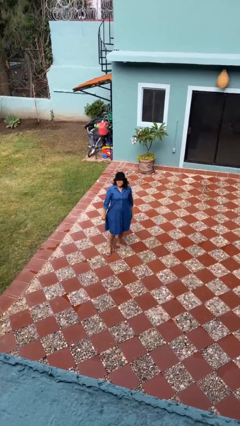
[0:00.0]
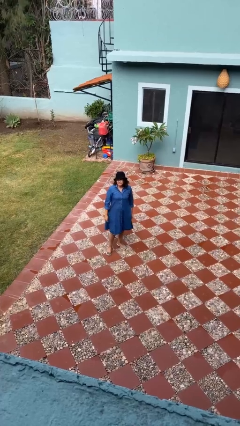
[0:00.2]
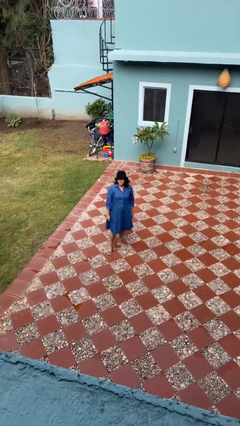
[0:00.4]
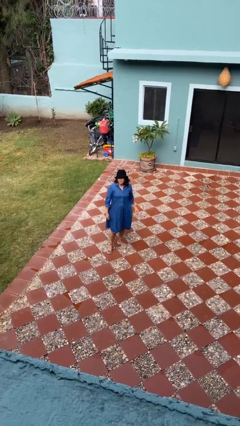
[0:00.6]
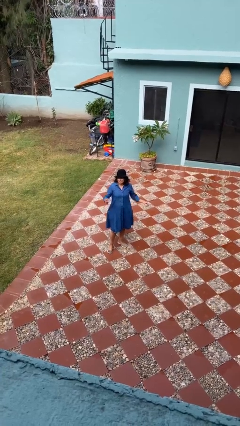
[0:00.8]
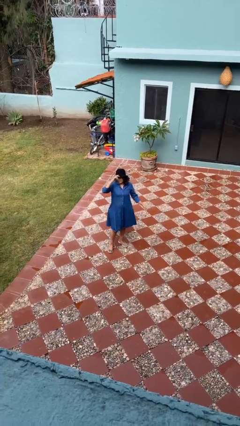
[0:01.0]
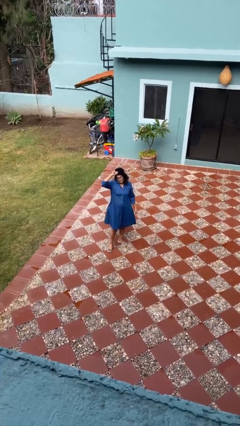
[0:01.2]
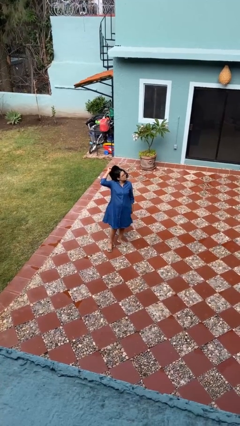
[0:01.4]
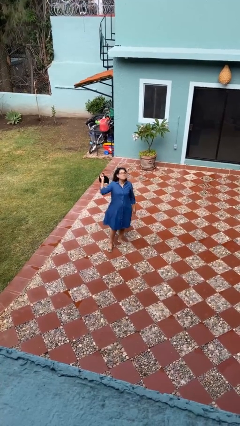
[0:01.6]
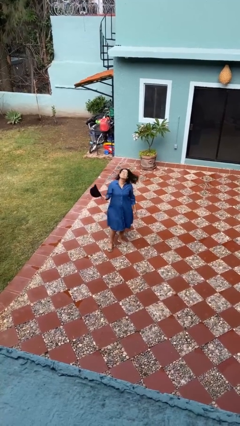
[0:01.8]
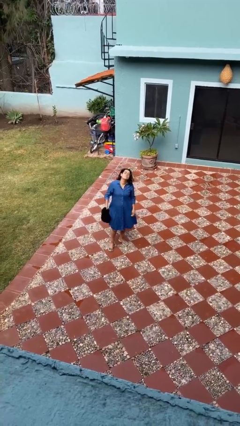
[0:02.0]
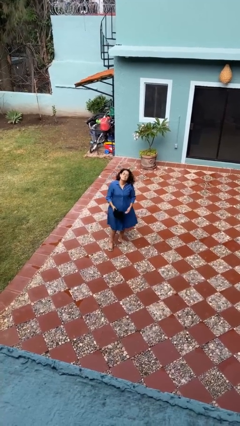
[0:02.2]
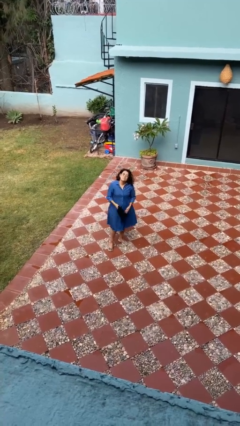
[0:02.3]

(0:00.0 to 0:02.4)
person takes off hat

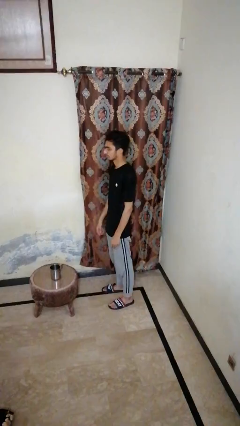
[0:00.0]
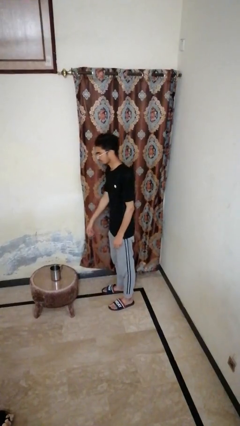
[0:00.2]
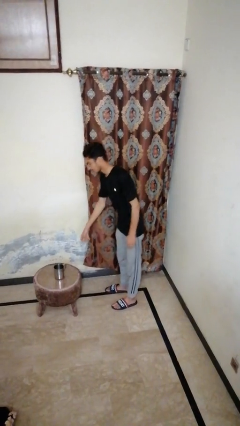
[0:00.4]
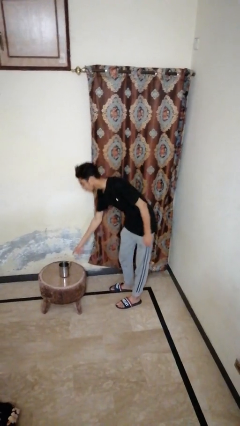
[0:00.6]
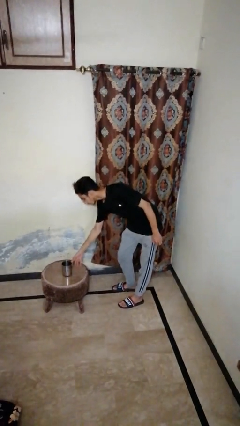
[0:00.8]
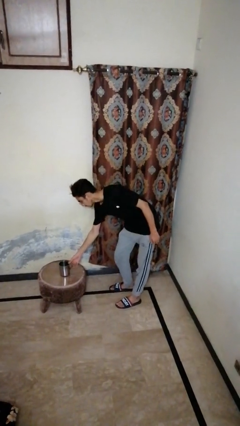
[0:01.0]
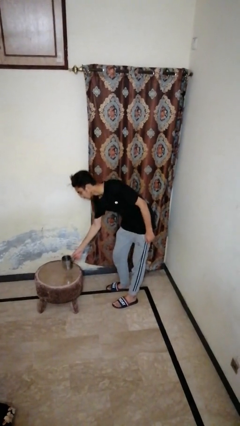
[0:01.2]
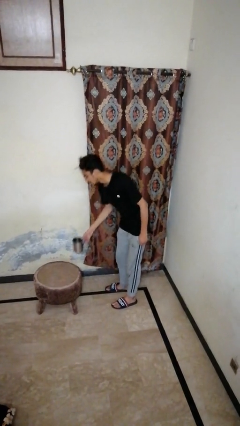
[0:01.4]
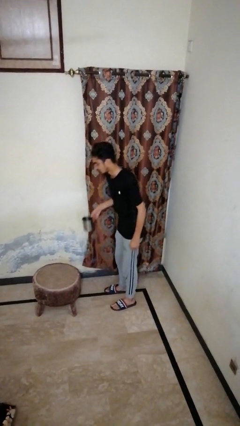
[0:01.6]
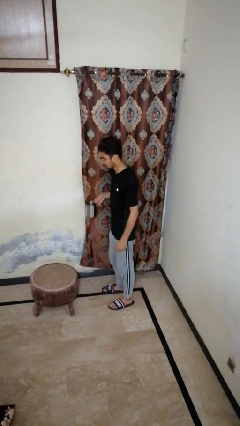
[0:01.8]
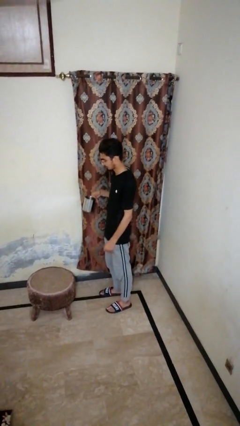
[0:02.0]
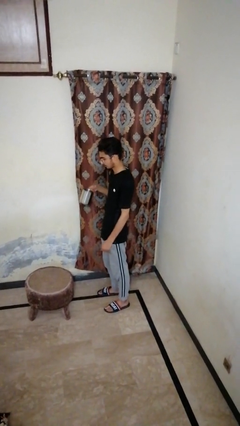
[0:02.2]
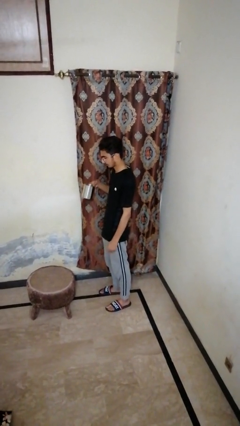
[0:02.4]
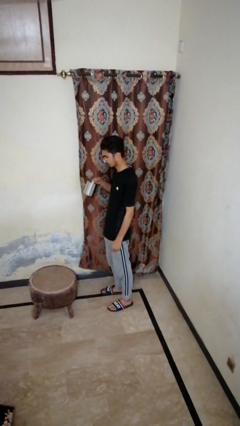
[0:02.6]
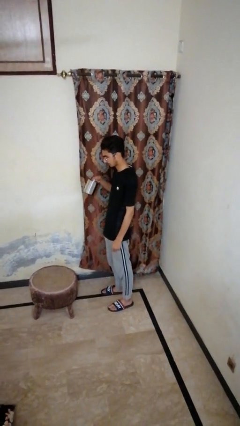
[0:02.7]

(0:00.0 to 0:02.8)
person picks up object from table

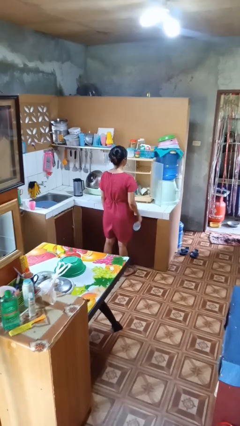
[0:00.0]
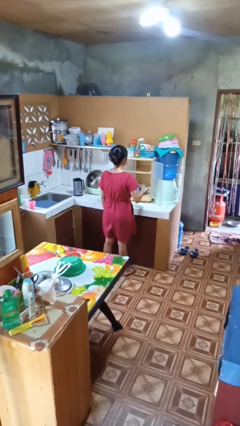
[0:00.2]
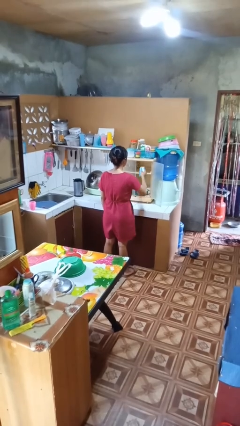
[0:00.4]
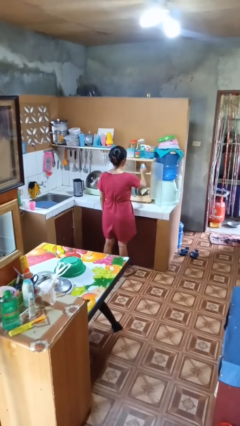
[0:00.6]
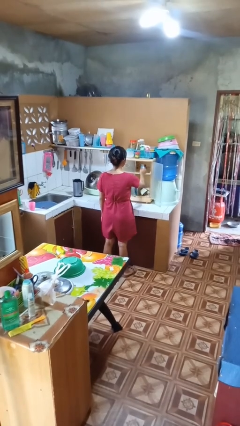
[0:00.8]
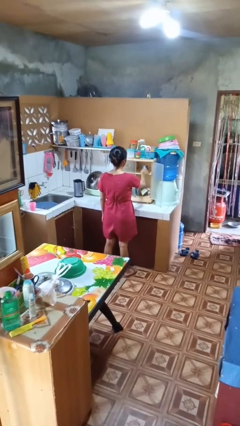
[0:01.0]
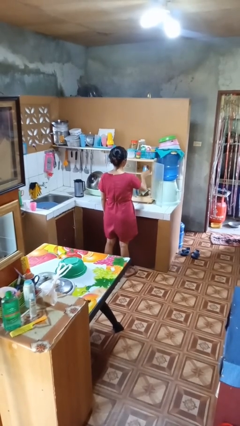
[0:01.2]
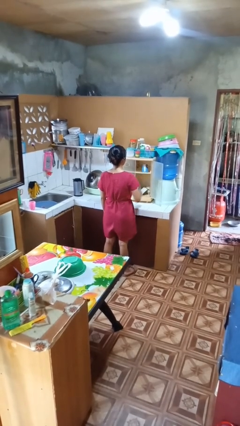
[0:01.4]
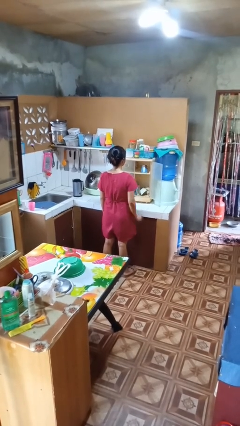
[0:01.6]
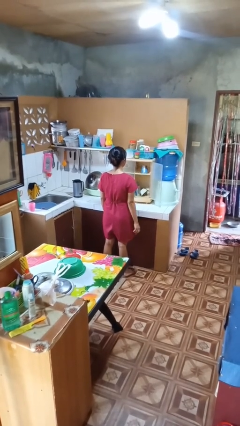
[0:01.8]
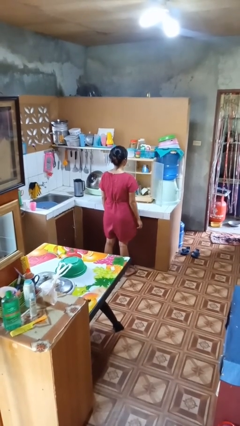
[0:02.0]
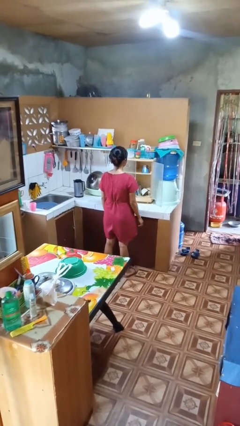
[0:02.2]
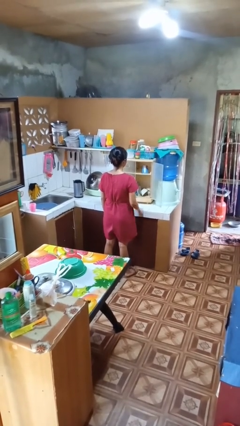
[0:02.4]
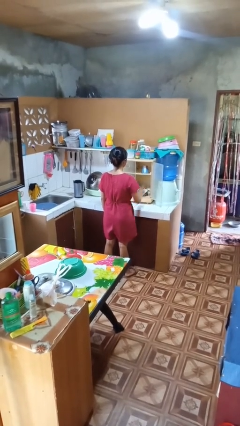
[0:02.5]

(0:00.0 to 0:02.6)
person puts object in cabinet

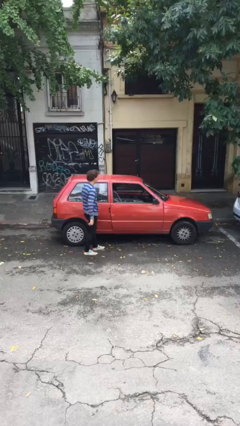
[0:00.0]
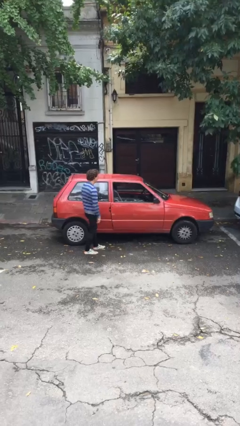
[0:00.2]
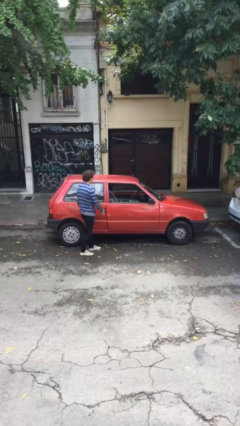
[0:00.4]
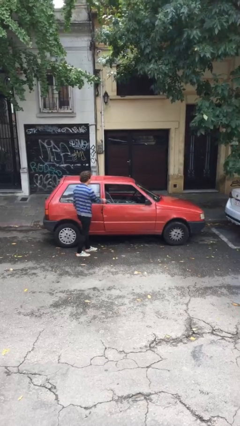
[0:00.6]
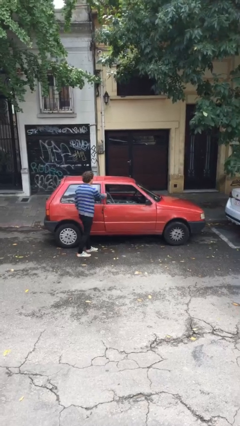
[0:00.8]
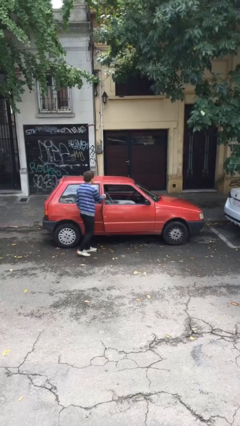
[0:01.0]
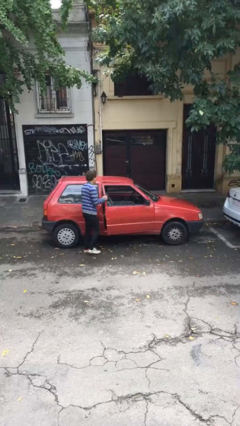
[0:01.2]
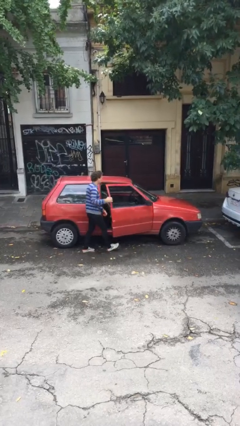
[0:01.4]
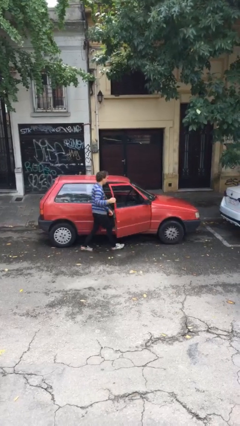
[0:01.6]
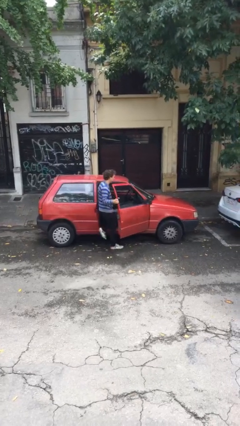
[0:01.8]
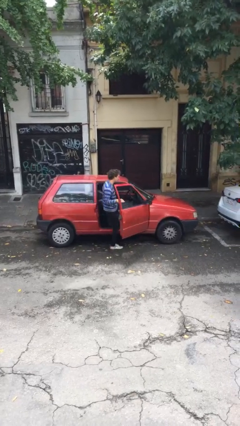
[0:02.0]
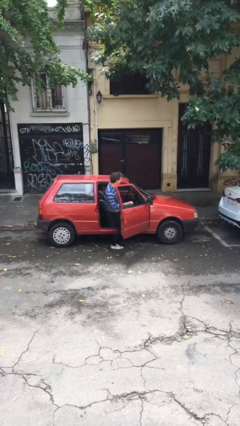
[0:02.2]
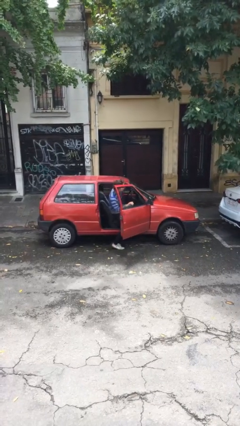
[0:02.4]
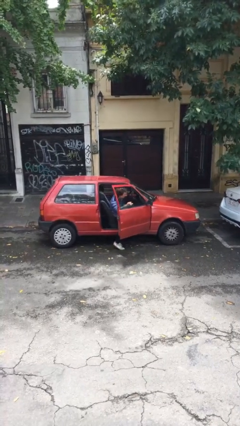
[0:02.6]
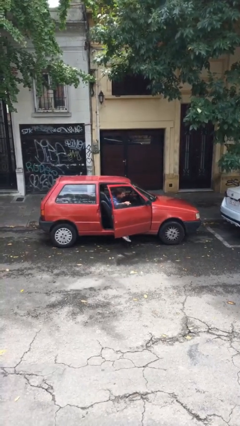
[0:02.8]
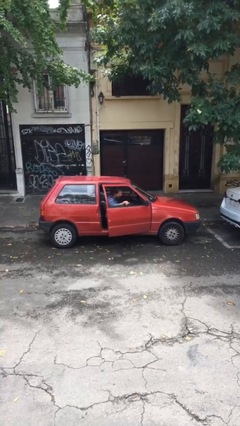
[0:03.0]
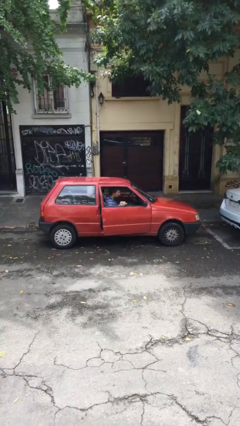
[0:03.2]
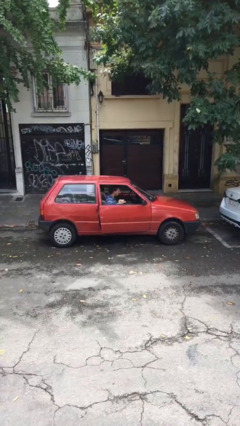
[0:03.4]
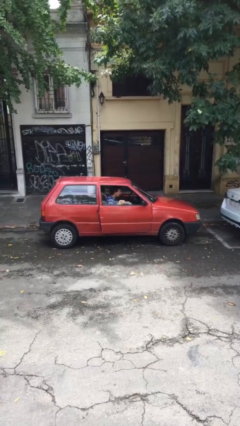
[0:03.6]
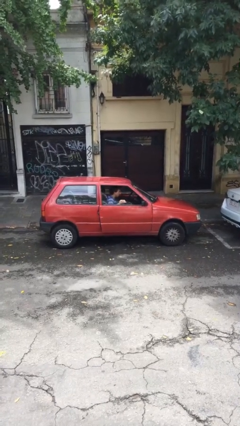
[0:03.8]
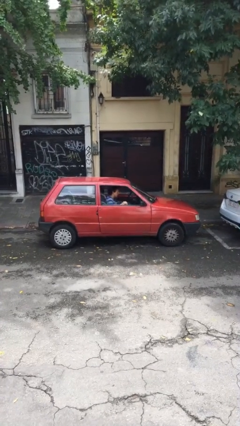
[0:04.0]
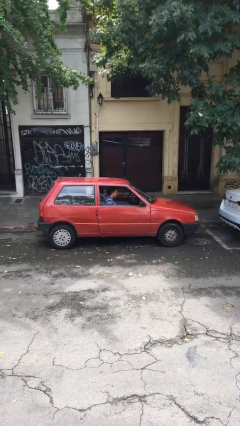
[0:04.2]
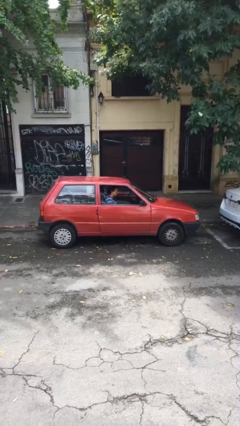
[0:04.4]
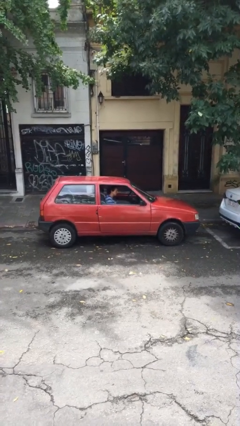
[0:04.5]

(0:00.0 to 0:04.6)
car picks up person

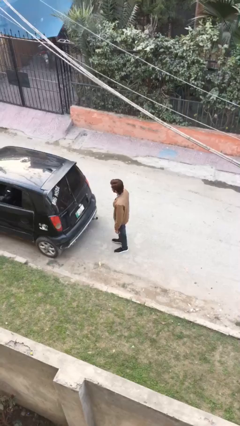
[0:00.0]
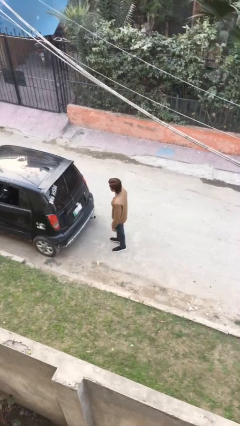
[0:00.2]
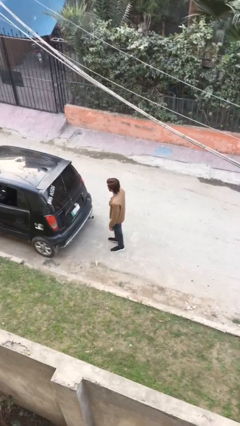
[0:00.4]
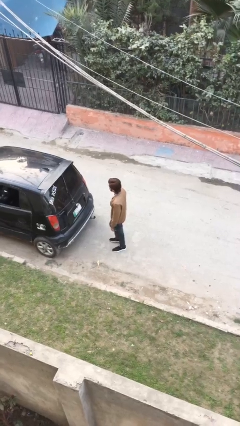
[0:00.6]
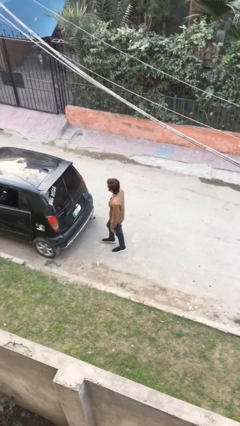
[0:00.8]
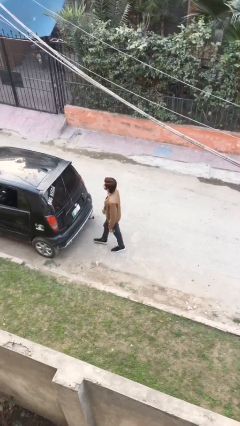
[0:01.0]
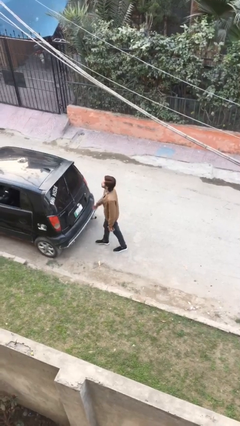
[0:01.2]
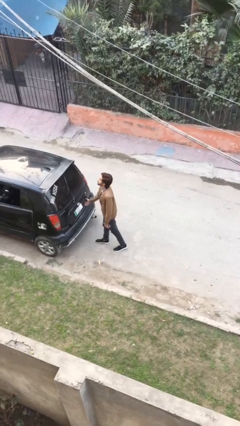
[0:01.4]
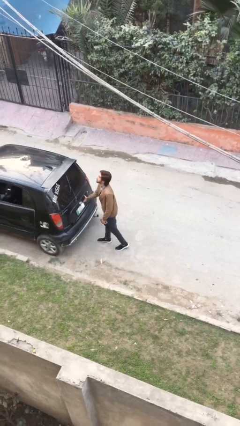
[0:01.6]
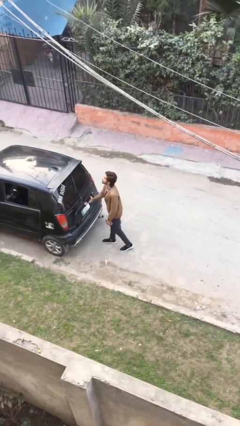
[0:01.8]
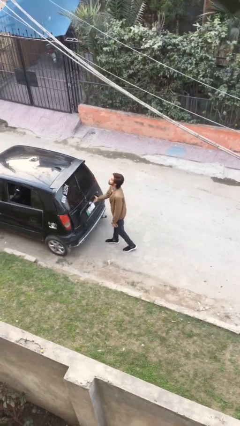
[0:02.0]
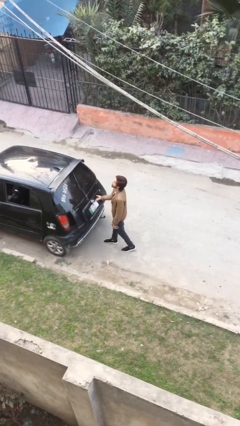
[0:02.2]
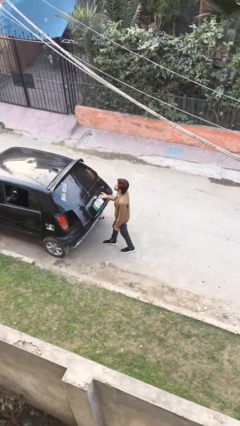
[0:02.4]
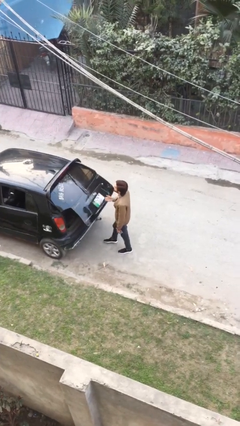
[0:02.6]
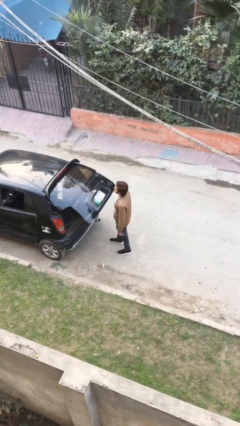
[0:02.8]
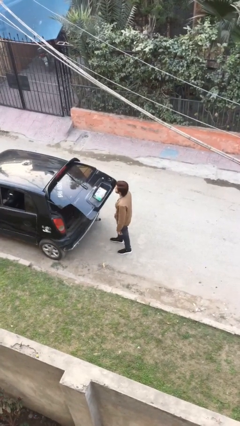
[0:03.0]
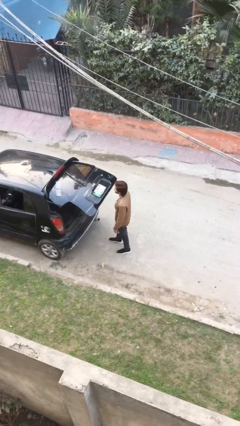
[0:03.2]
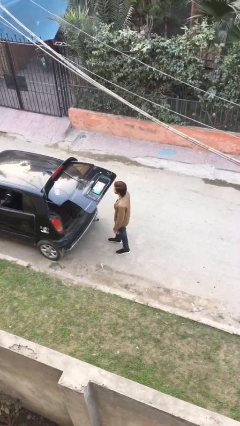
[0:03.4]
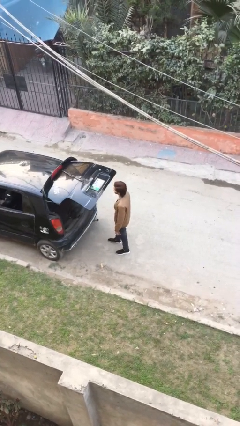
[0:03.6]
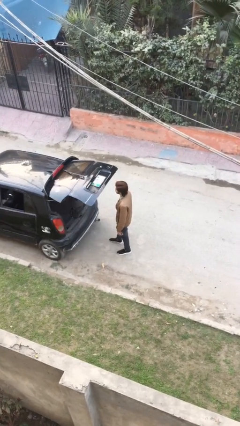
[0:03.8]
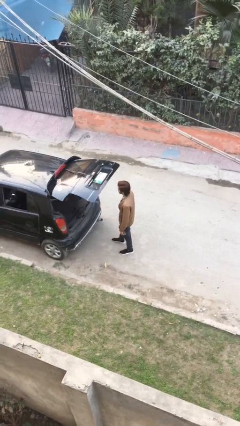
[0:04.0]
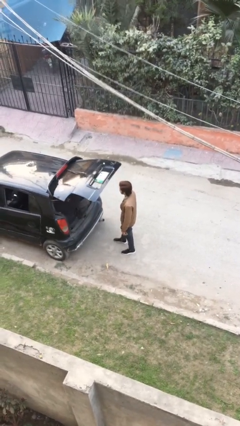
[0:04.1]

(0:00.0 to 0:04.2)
person opens car trunk

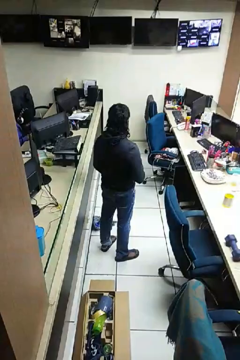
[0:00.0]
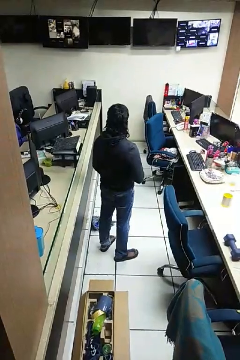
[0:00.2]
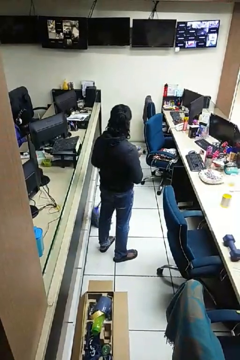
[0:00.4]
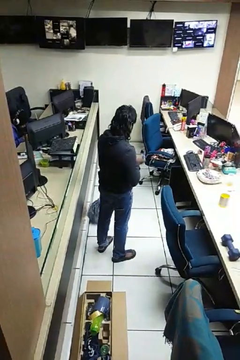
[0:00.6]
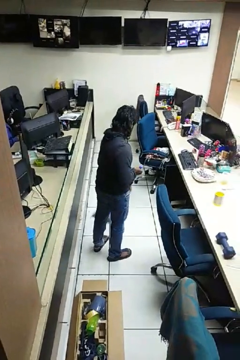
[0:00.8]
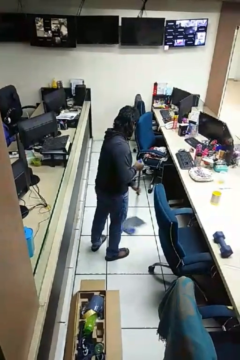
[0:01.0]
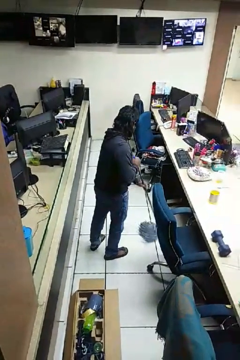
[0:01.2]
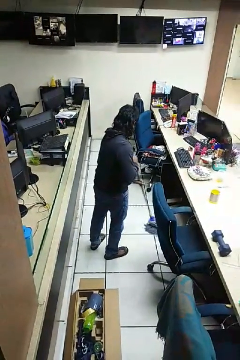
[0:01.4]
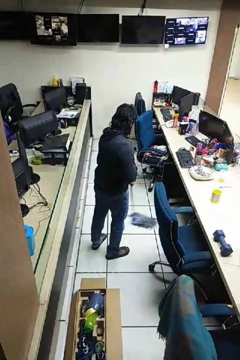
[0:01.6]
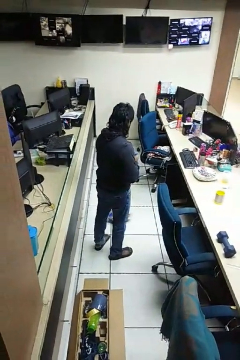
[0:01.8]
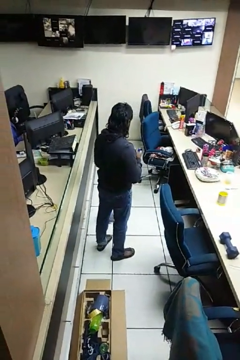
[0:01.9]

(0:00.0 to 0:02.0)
person mops
